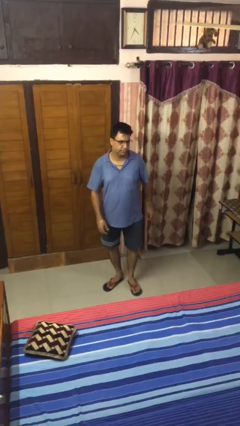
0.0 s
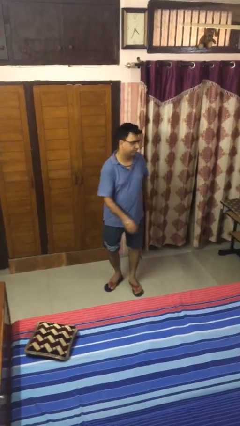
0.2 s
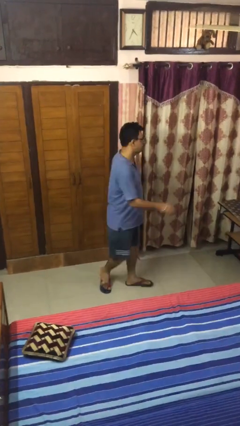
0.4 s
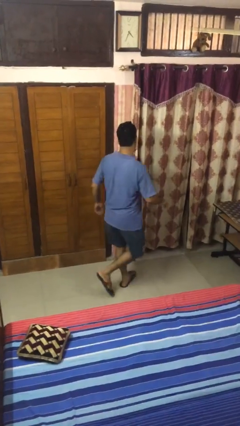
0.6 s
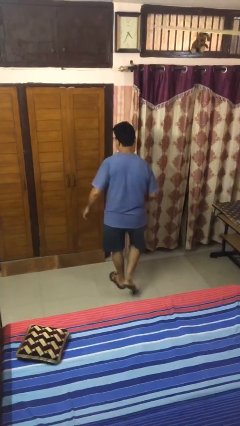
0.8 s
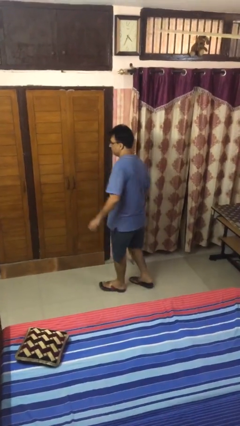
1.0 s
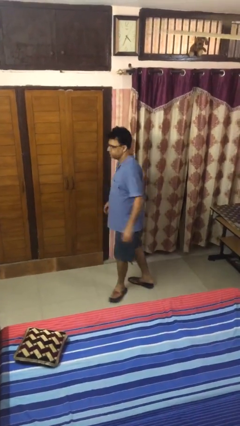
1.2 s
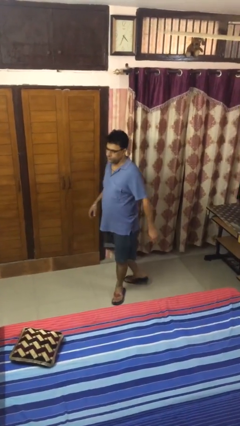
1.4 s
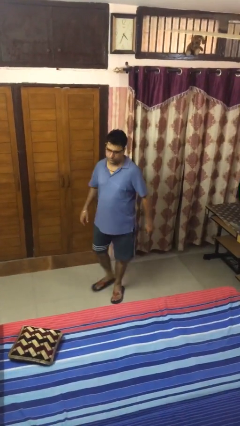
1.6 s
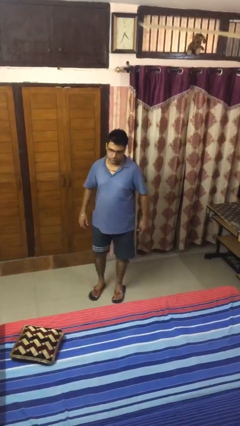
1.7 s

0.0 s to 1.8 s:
person twirls

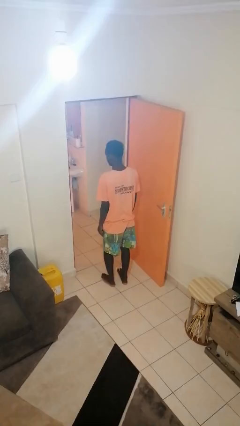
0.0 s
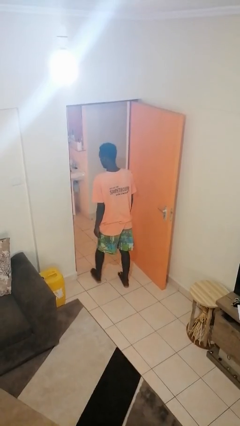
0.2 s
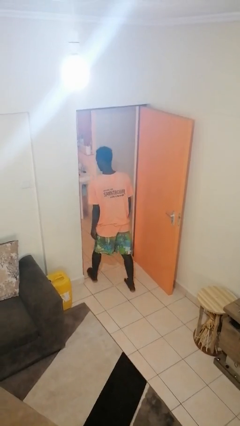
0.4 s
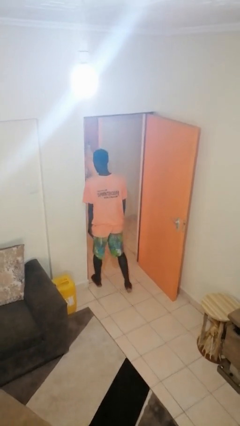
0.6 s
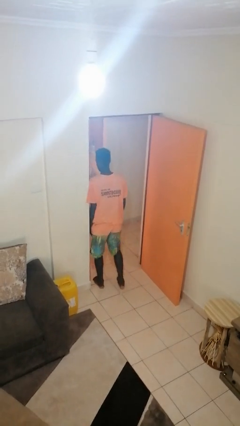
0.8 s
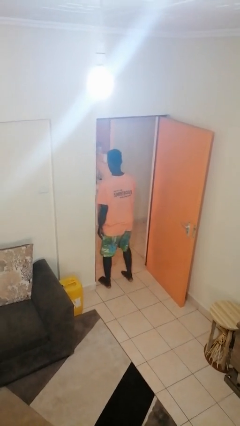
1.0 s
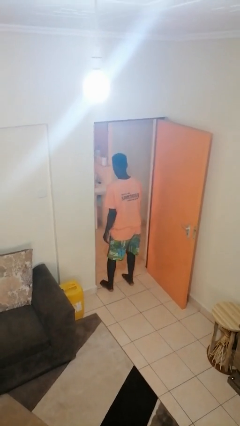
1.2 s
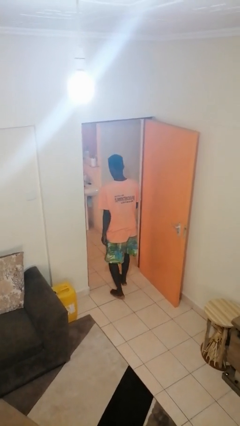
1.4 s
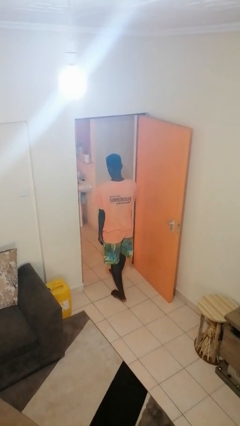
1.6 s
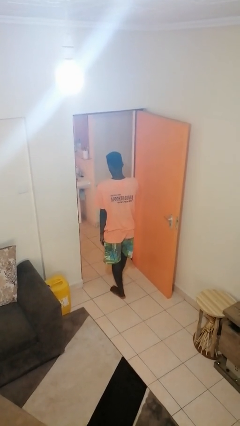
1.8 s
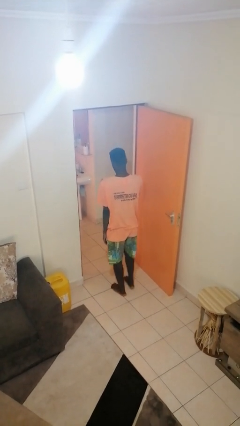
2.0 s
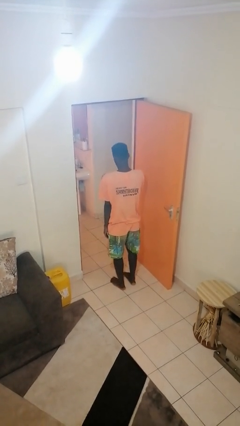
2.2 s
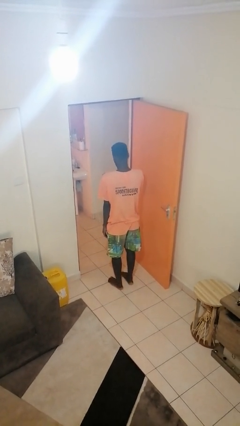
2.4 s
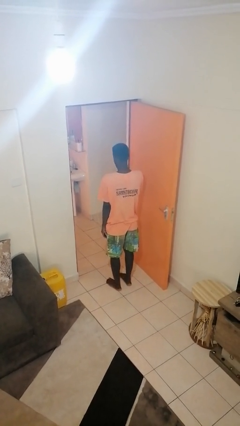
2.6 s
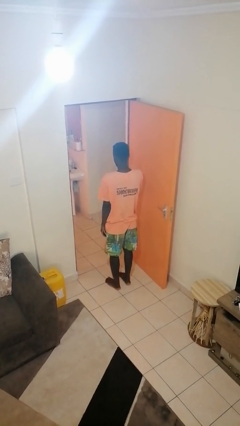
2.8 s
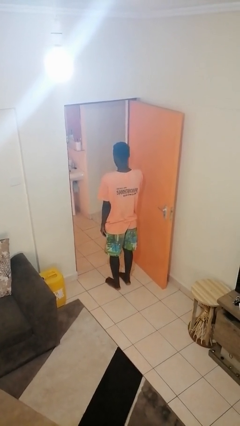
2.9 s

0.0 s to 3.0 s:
person bumps into wall

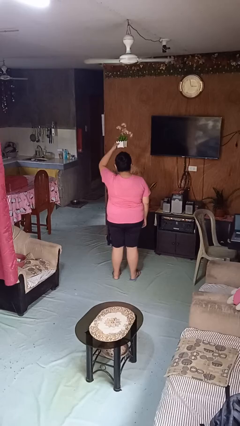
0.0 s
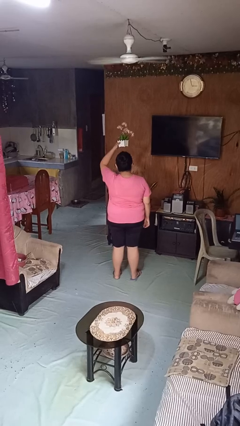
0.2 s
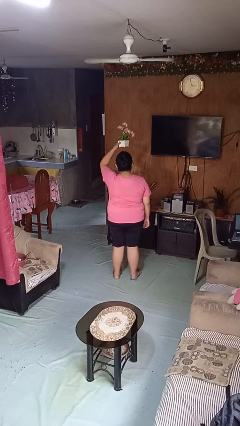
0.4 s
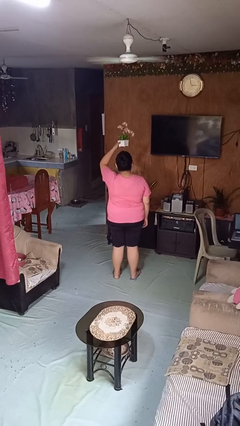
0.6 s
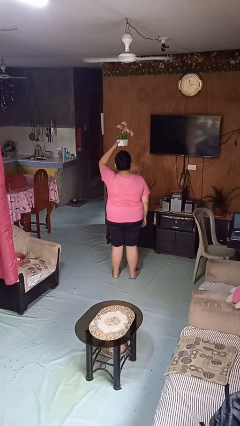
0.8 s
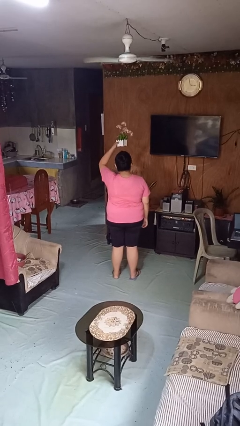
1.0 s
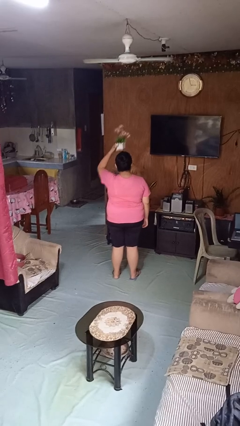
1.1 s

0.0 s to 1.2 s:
person holds object above head

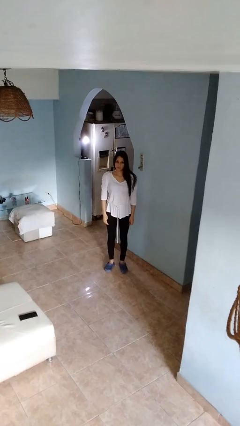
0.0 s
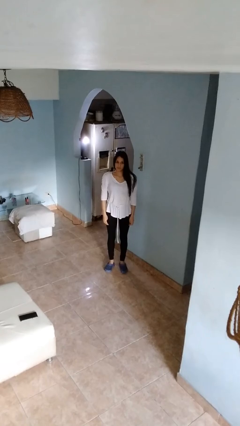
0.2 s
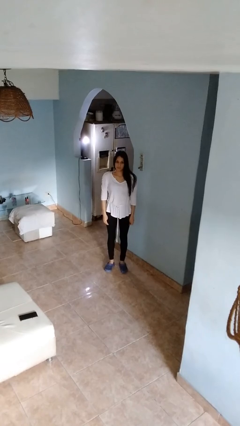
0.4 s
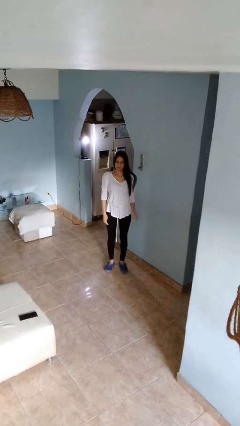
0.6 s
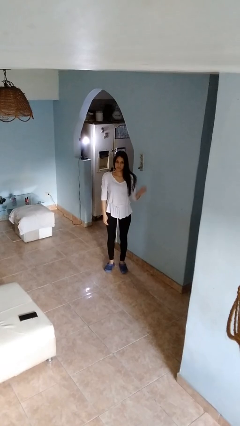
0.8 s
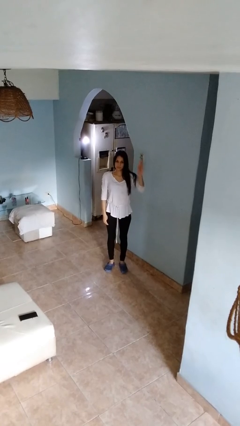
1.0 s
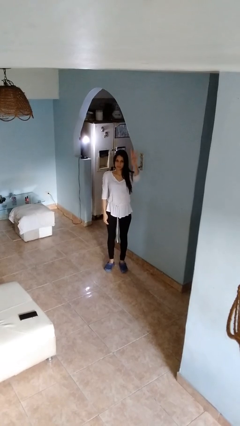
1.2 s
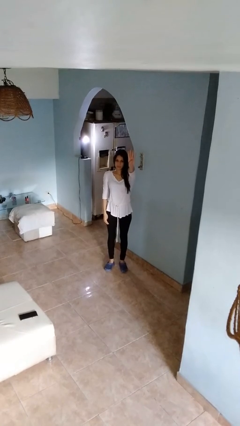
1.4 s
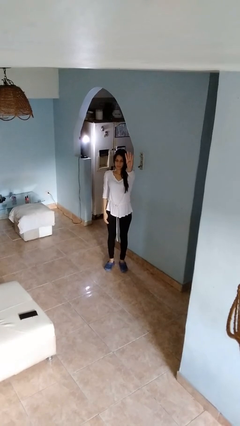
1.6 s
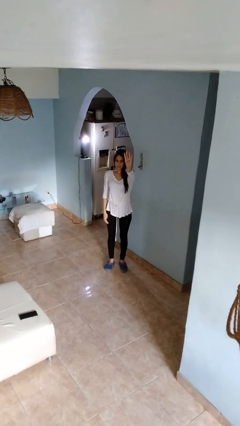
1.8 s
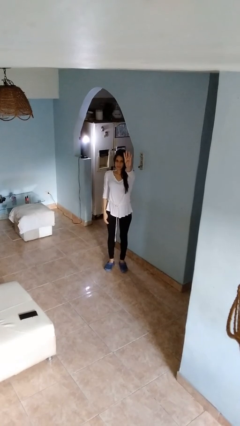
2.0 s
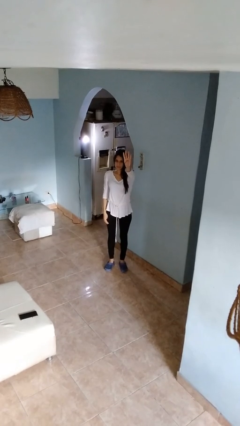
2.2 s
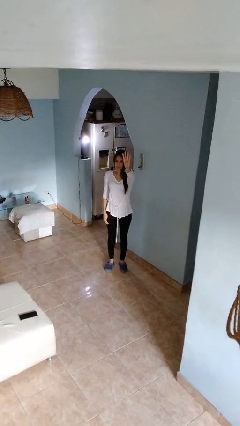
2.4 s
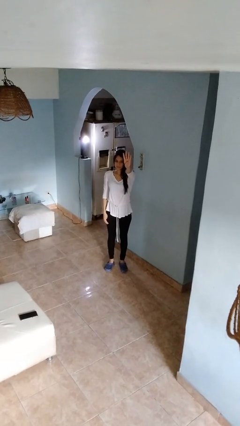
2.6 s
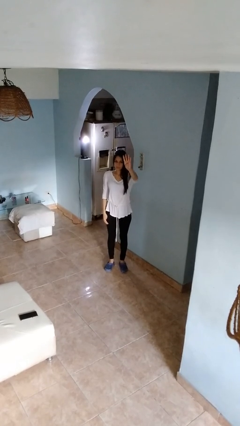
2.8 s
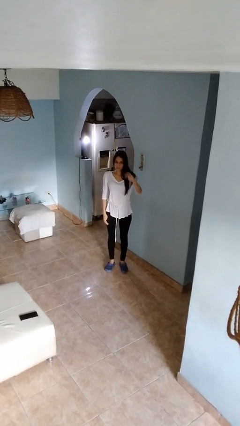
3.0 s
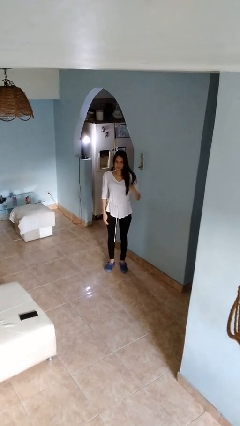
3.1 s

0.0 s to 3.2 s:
person gestures number four

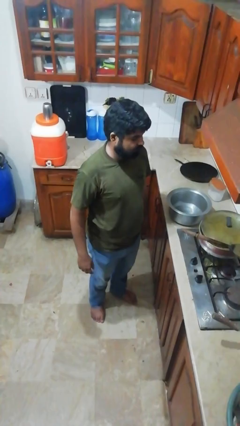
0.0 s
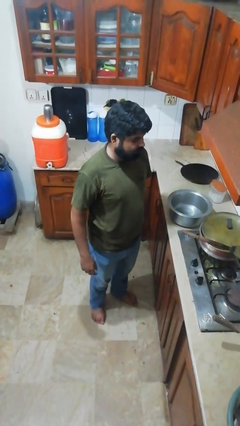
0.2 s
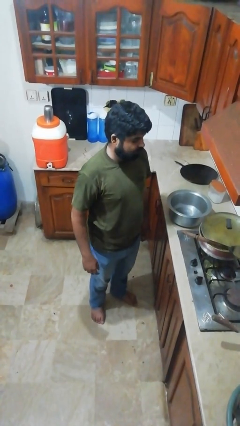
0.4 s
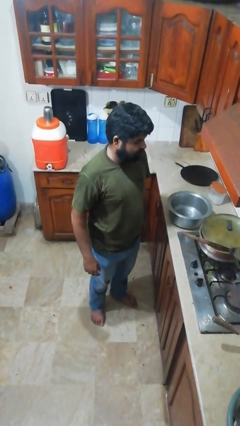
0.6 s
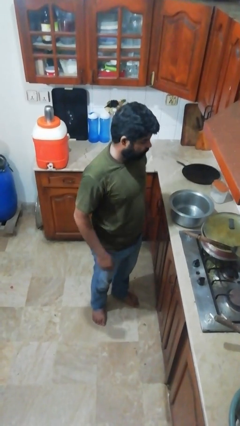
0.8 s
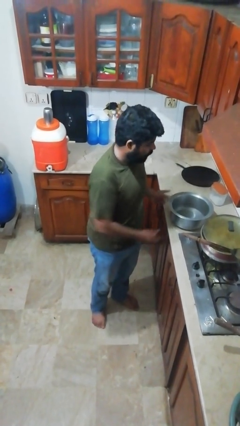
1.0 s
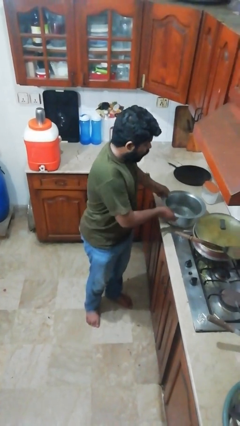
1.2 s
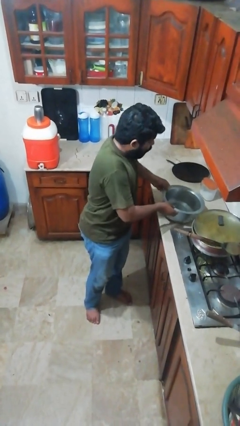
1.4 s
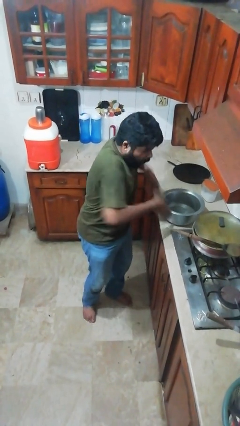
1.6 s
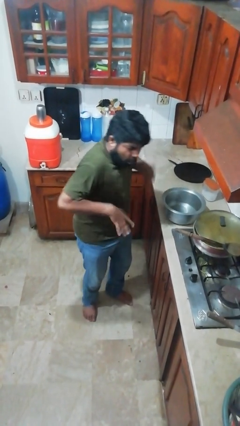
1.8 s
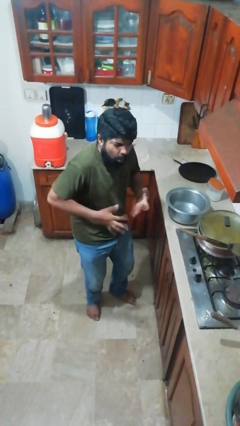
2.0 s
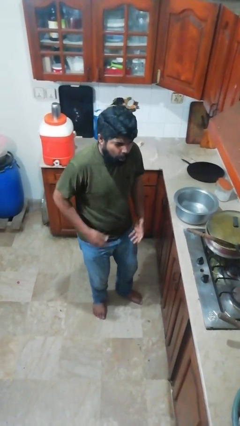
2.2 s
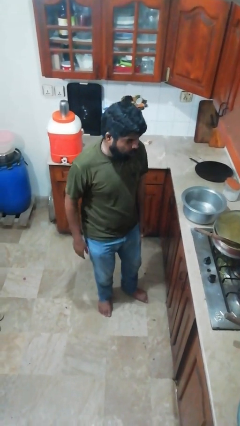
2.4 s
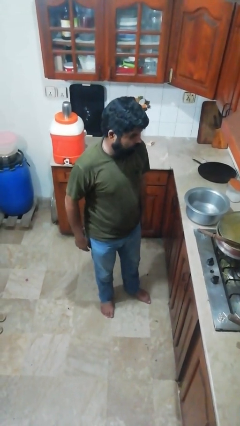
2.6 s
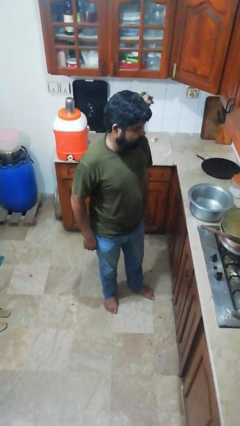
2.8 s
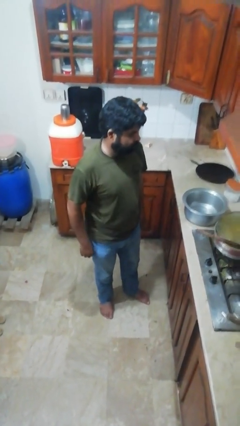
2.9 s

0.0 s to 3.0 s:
person burns hand

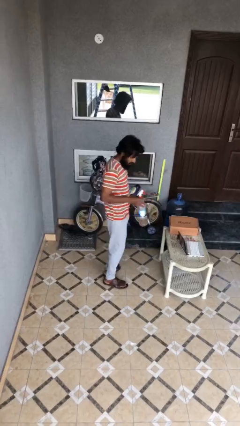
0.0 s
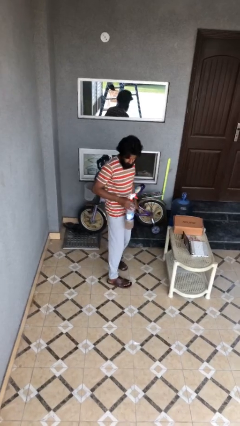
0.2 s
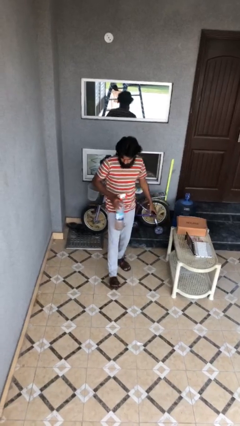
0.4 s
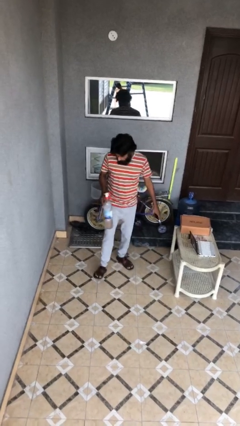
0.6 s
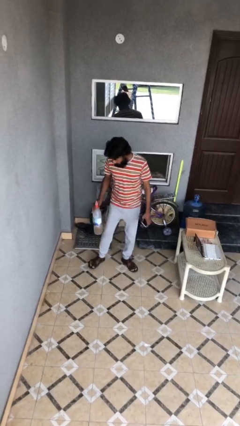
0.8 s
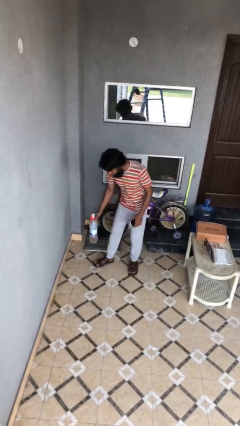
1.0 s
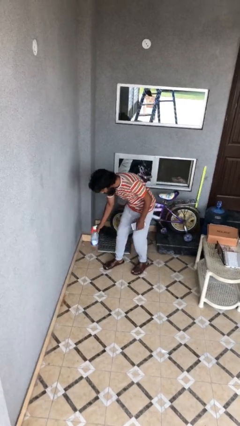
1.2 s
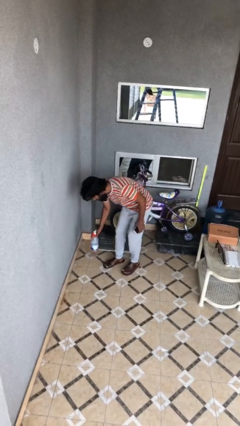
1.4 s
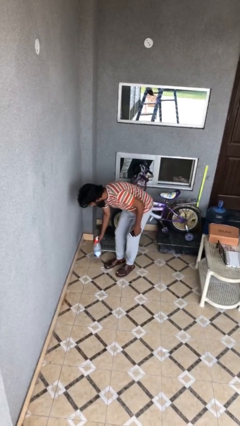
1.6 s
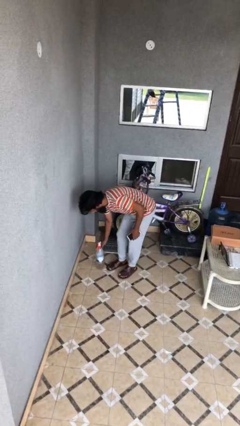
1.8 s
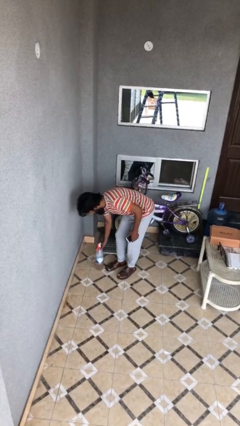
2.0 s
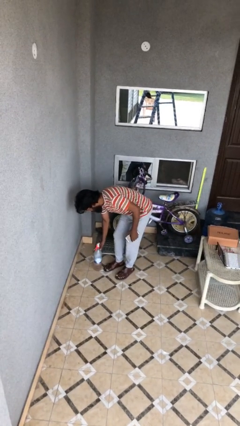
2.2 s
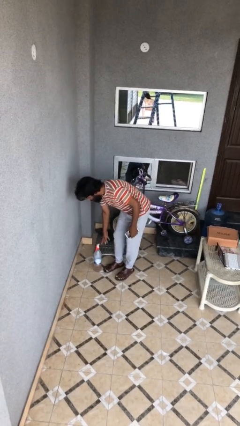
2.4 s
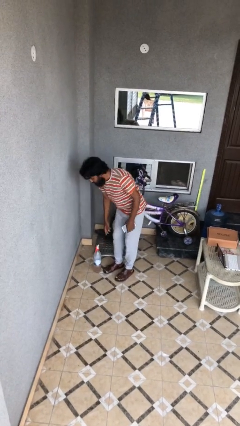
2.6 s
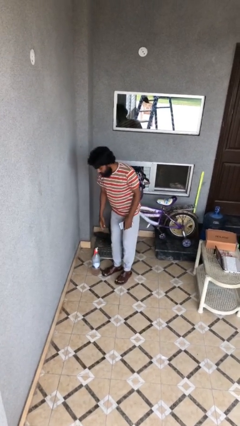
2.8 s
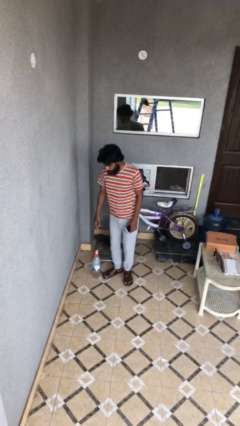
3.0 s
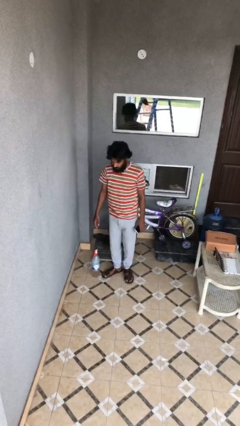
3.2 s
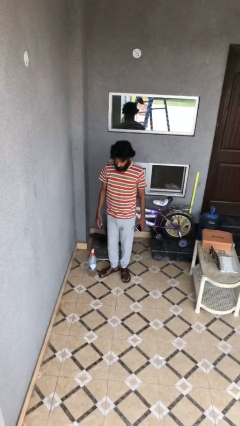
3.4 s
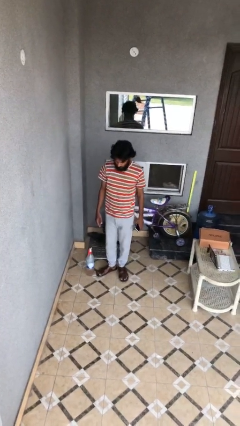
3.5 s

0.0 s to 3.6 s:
person puts down object on floor

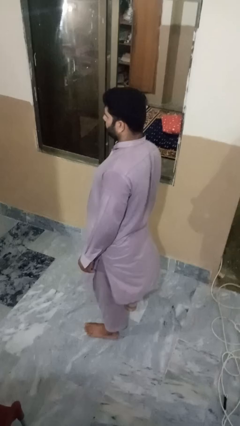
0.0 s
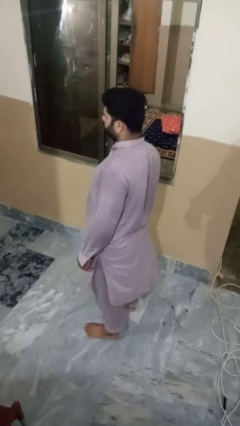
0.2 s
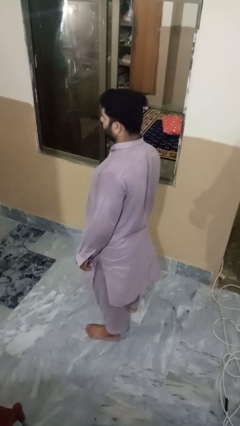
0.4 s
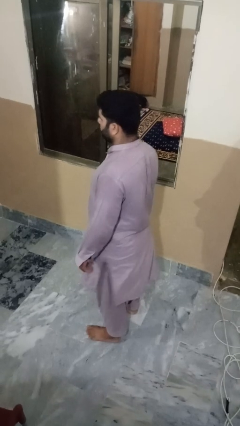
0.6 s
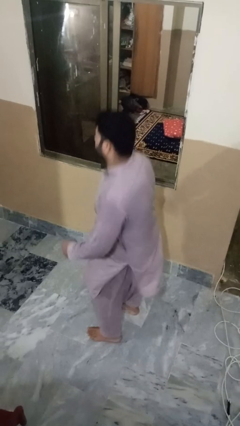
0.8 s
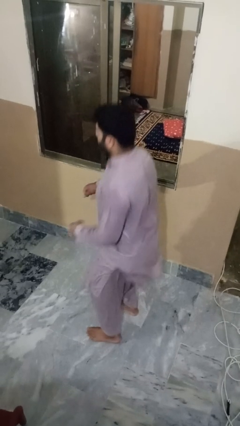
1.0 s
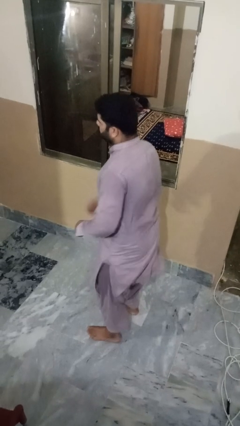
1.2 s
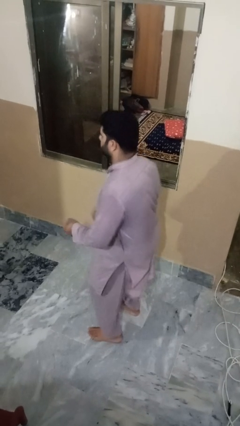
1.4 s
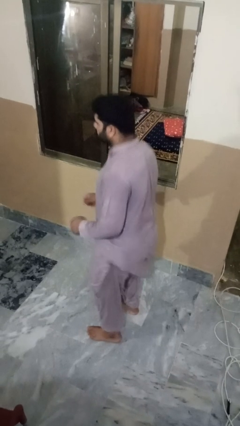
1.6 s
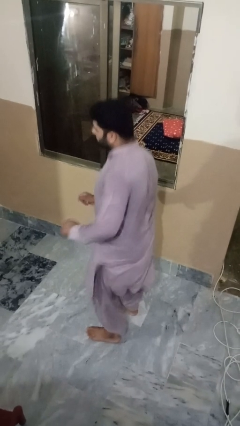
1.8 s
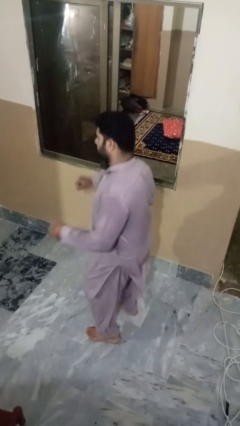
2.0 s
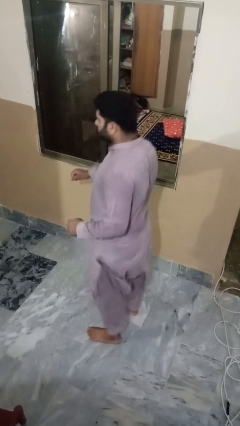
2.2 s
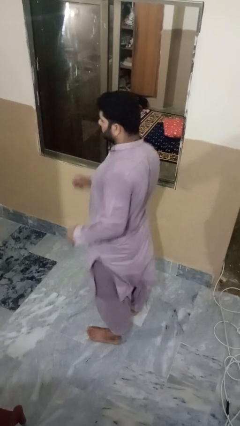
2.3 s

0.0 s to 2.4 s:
person dances in place
